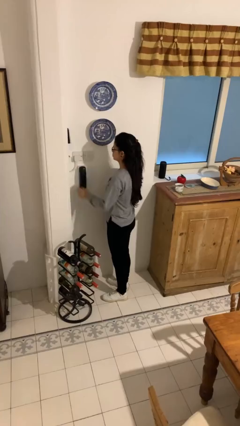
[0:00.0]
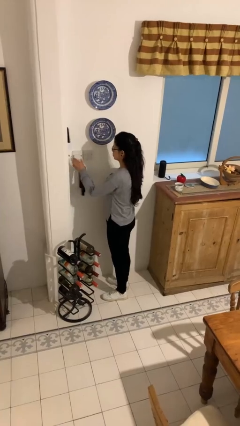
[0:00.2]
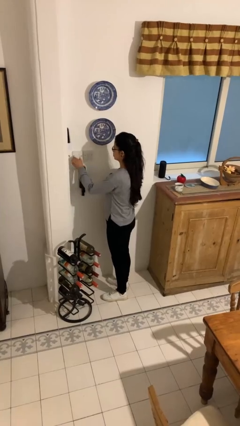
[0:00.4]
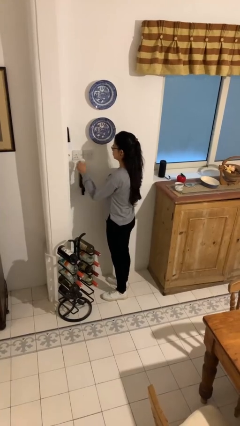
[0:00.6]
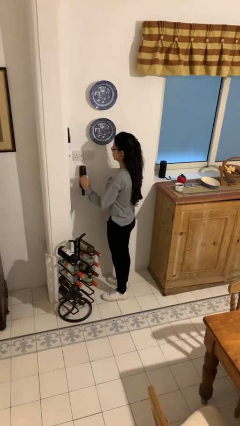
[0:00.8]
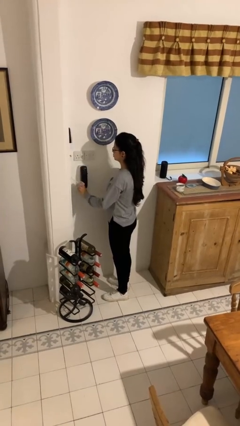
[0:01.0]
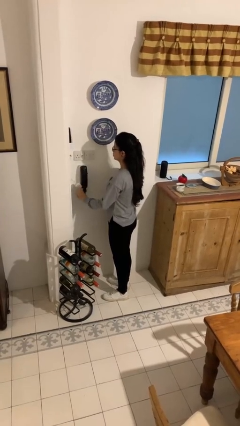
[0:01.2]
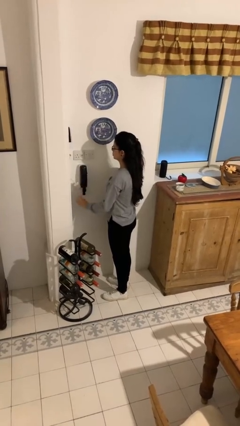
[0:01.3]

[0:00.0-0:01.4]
person unplugs from electrical socket

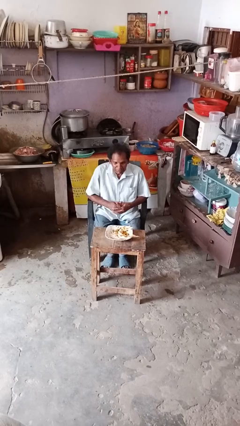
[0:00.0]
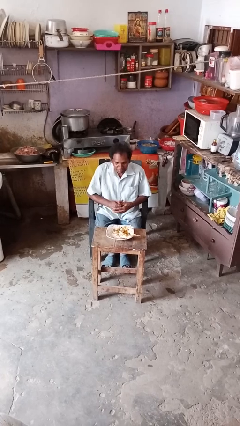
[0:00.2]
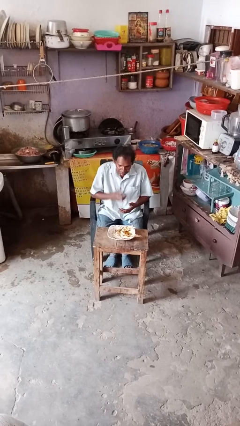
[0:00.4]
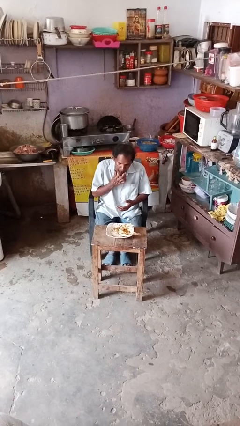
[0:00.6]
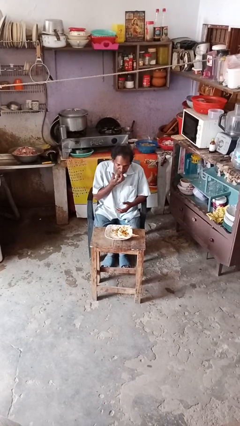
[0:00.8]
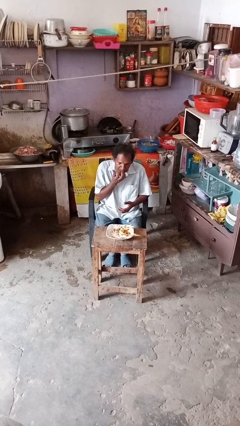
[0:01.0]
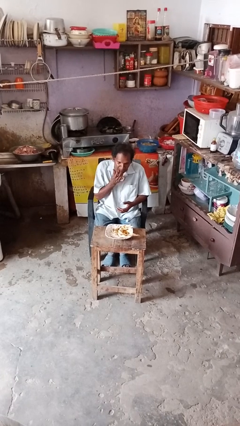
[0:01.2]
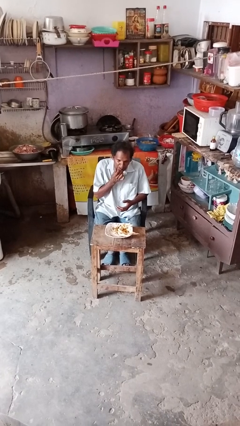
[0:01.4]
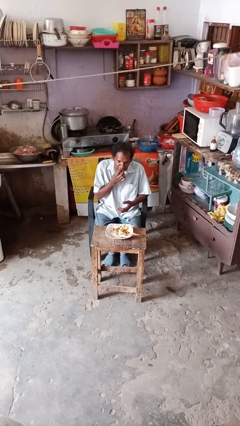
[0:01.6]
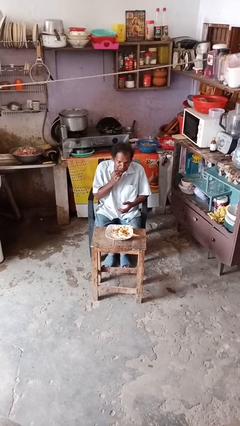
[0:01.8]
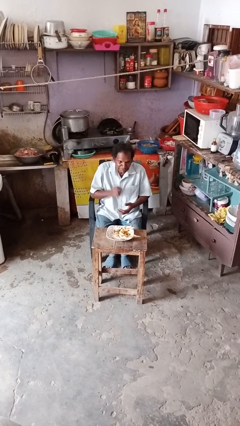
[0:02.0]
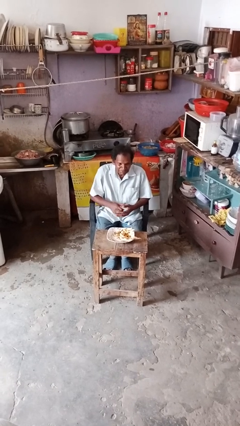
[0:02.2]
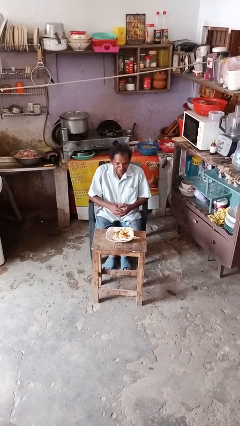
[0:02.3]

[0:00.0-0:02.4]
person licks fingers

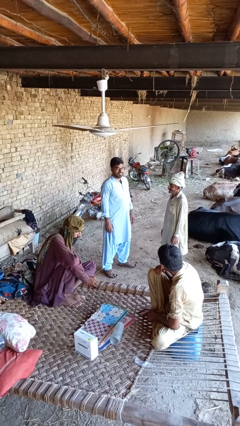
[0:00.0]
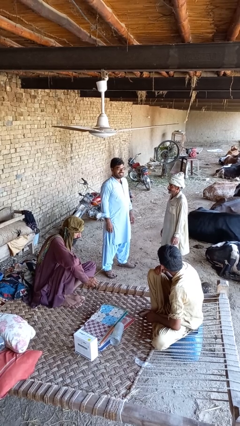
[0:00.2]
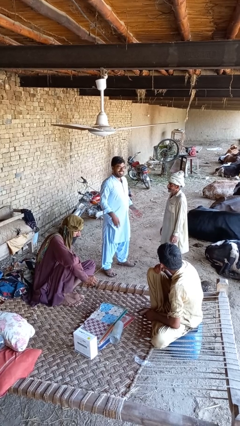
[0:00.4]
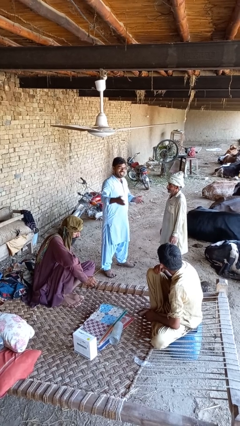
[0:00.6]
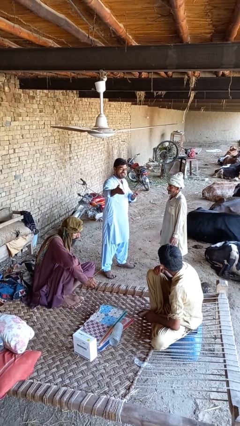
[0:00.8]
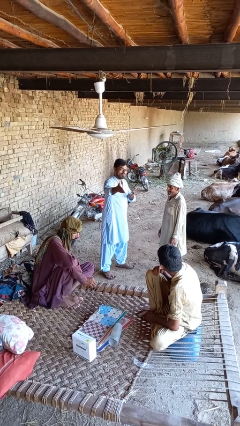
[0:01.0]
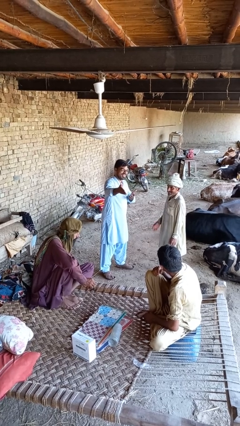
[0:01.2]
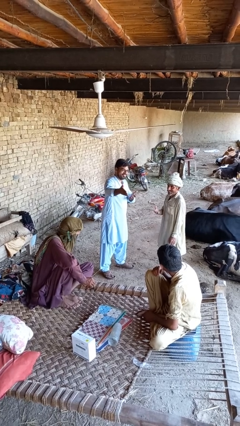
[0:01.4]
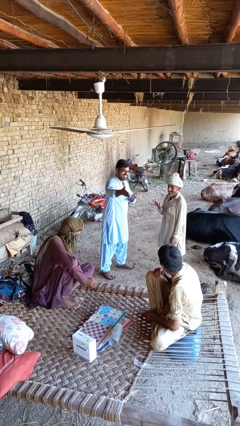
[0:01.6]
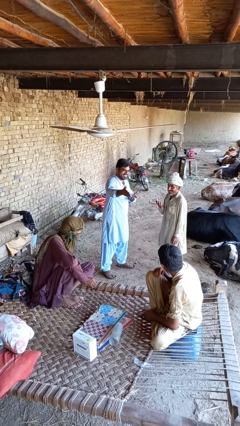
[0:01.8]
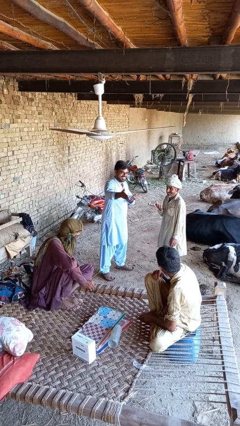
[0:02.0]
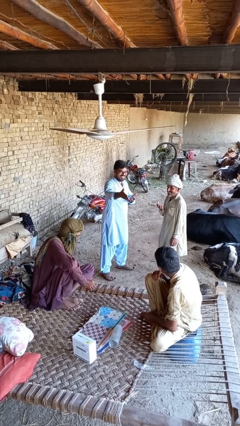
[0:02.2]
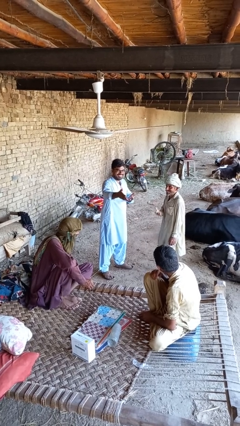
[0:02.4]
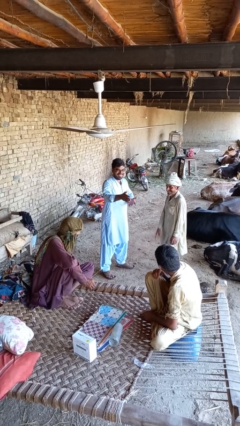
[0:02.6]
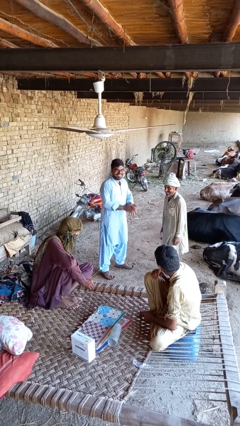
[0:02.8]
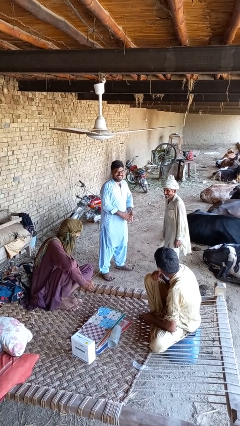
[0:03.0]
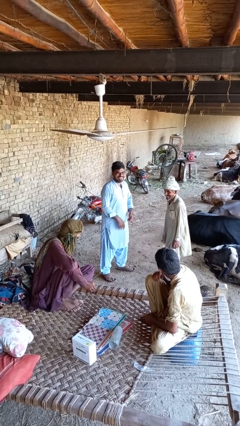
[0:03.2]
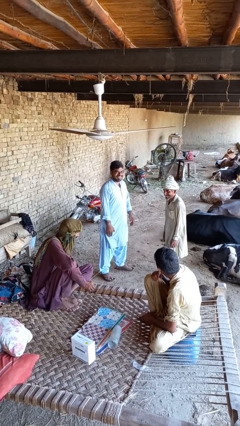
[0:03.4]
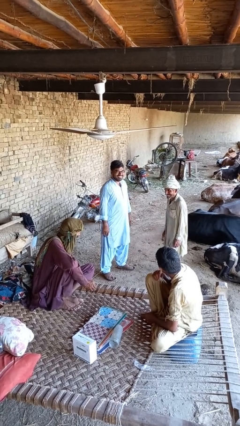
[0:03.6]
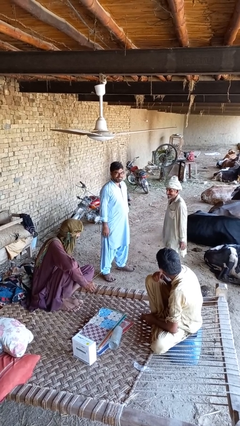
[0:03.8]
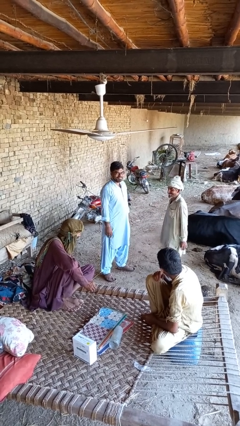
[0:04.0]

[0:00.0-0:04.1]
person laughs with person

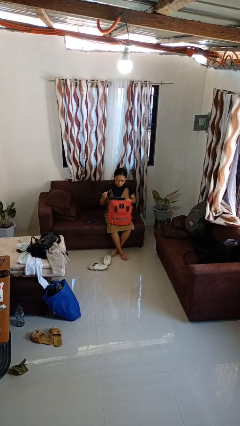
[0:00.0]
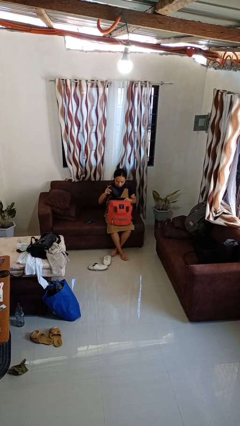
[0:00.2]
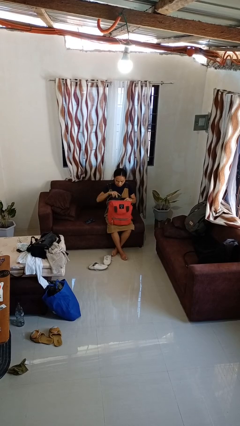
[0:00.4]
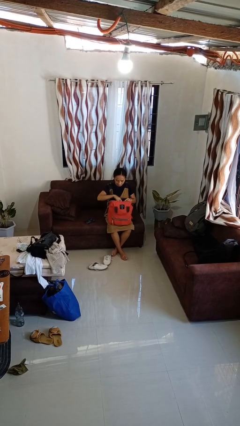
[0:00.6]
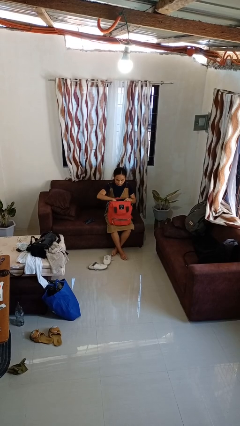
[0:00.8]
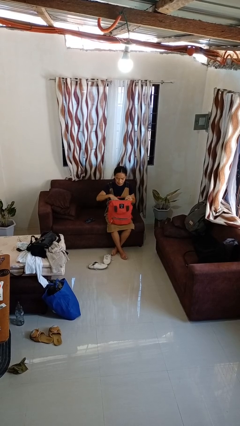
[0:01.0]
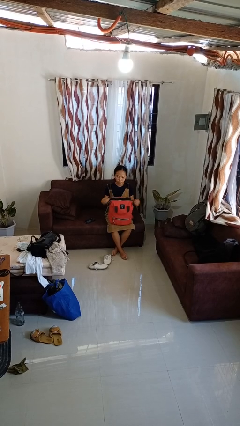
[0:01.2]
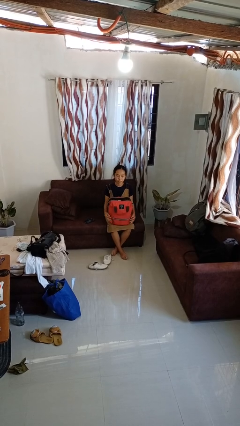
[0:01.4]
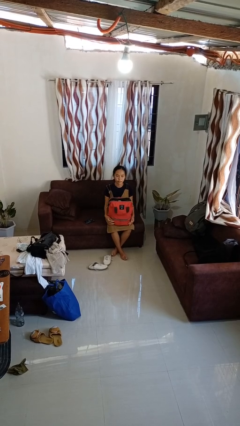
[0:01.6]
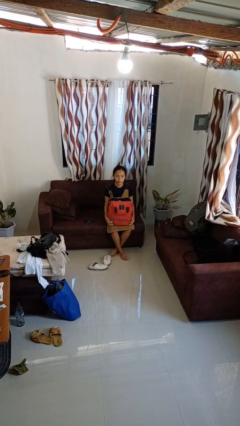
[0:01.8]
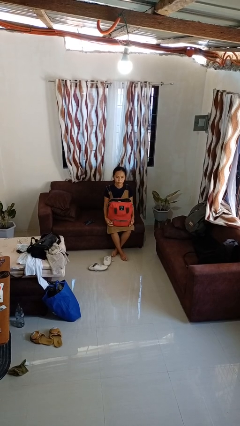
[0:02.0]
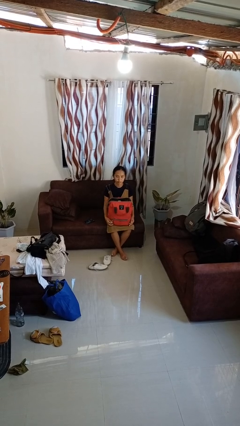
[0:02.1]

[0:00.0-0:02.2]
person puts object into backpack

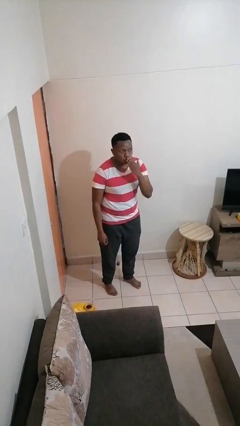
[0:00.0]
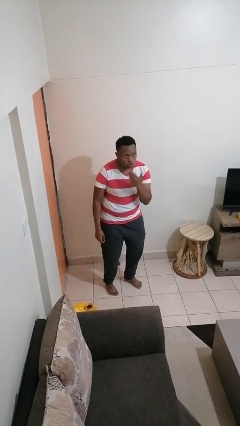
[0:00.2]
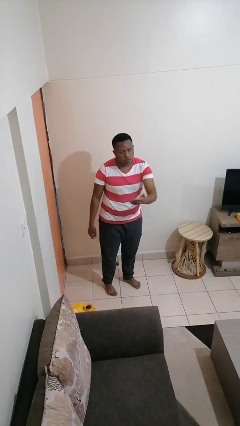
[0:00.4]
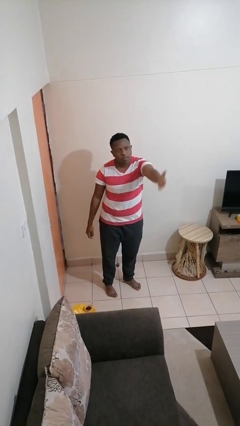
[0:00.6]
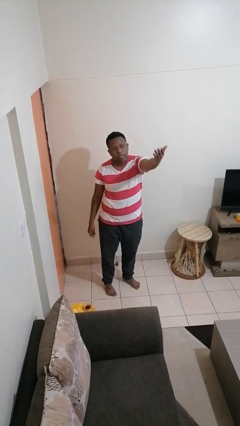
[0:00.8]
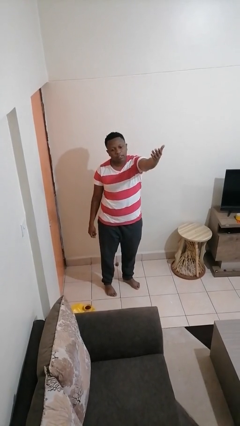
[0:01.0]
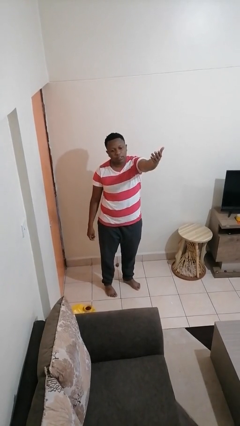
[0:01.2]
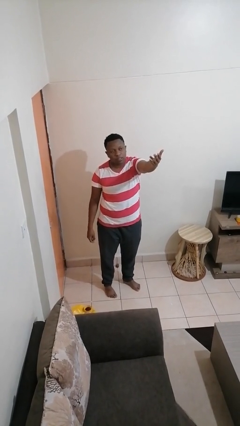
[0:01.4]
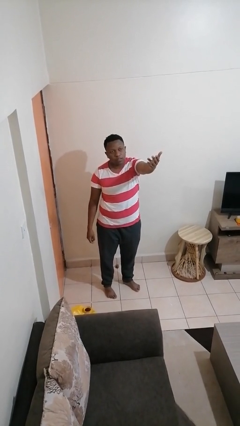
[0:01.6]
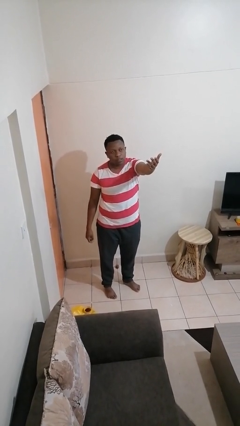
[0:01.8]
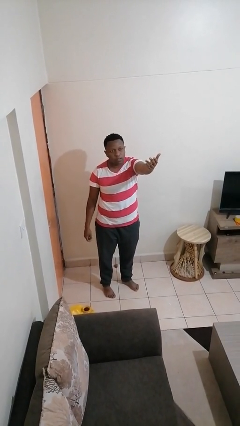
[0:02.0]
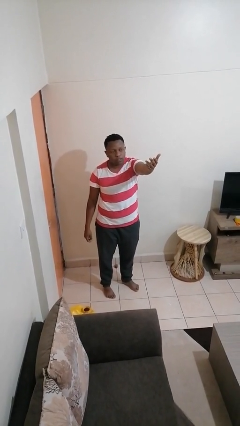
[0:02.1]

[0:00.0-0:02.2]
person gestures blow kiss

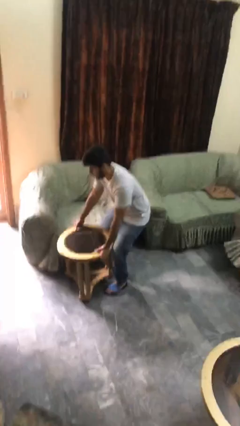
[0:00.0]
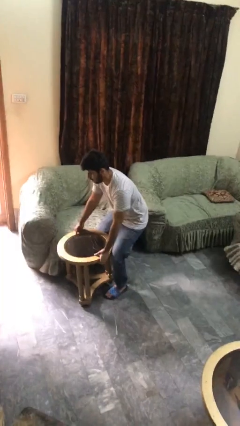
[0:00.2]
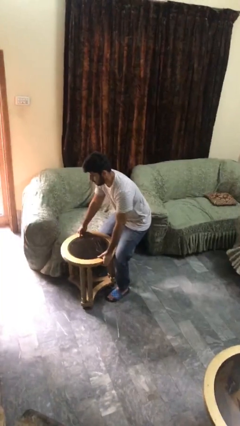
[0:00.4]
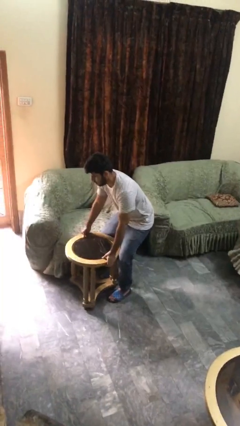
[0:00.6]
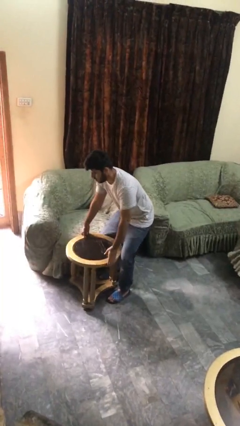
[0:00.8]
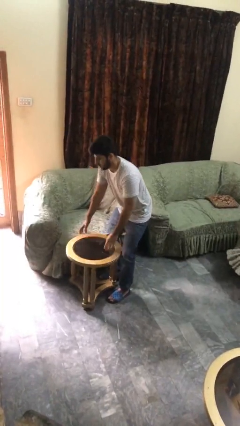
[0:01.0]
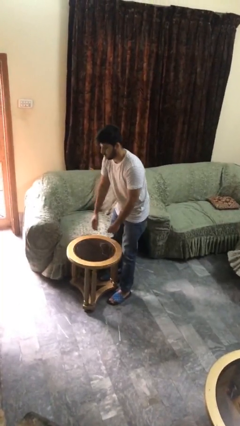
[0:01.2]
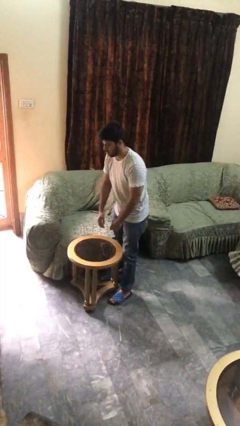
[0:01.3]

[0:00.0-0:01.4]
person puts down object on floor

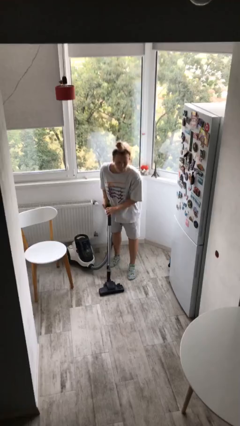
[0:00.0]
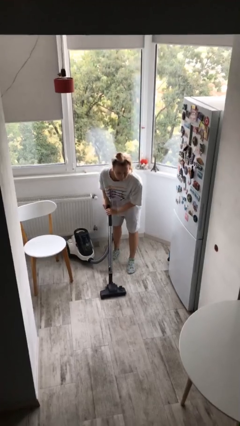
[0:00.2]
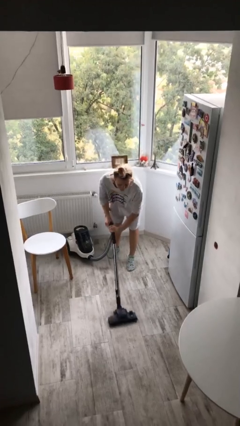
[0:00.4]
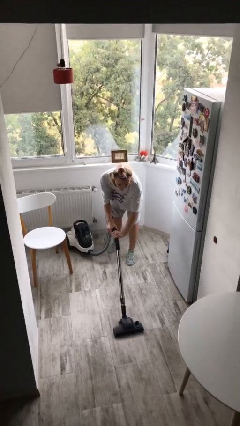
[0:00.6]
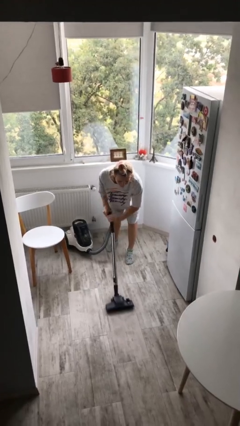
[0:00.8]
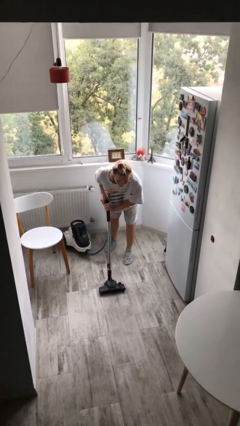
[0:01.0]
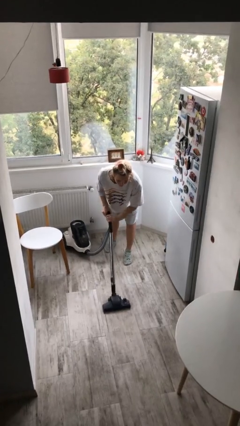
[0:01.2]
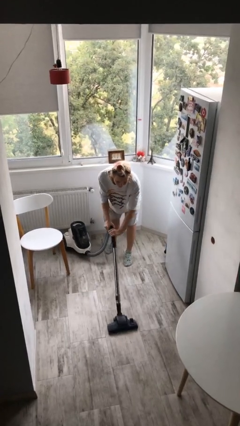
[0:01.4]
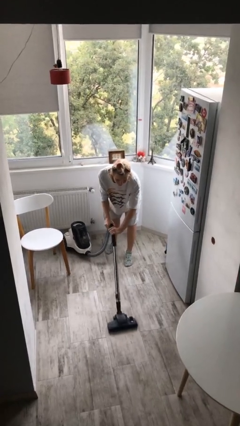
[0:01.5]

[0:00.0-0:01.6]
person vacuums carpet

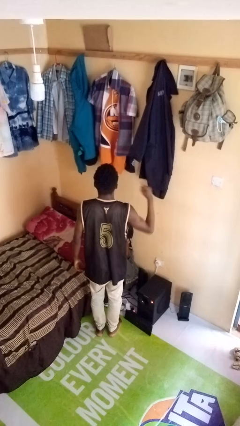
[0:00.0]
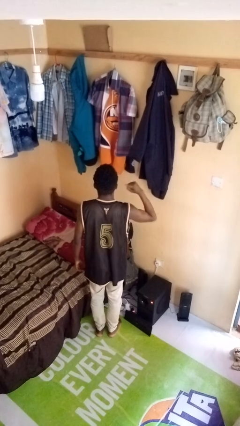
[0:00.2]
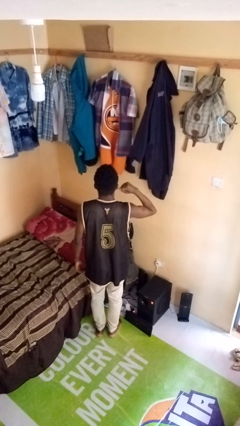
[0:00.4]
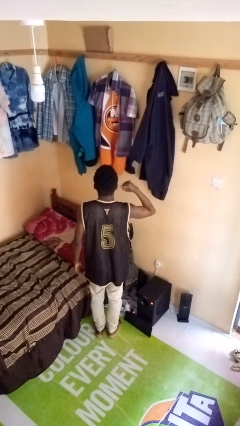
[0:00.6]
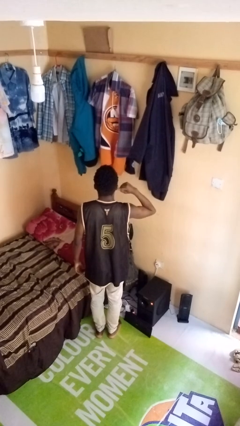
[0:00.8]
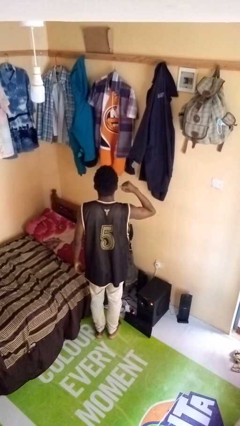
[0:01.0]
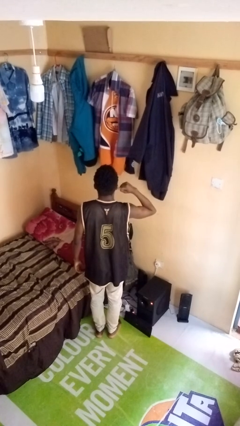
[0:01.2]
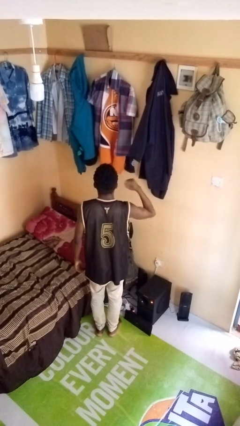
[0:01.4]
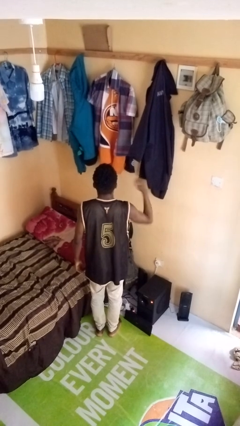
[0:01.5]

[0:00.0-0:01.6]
person gestures listen closely
